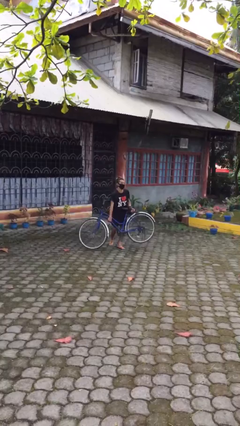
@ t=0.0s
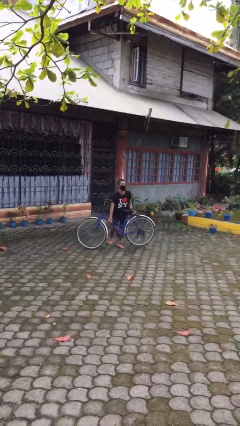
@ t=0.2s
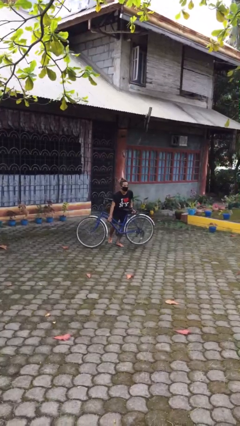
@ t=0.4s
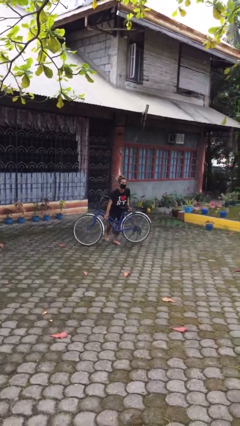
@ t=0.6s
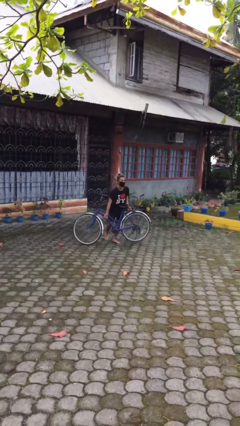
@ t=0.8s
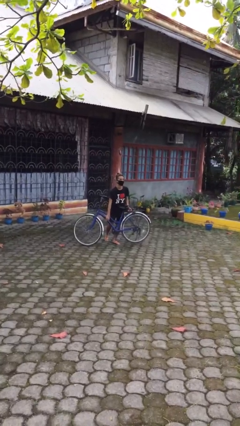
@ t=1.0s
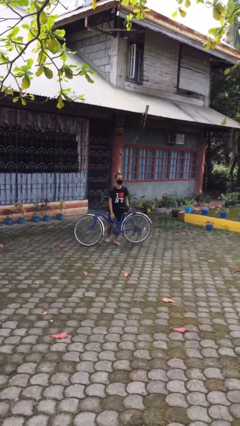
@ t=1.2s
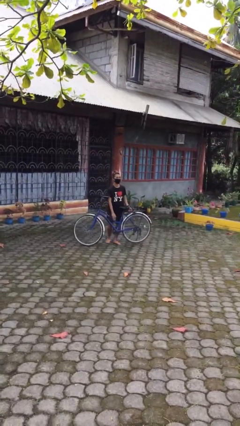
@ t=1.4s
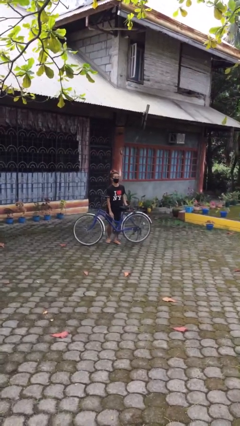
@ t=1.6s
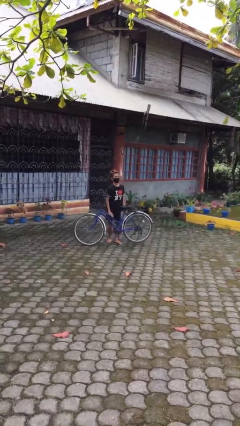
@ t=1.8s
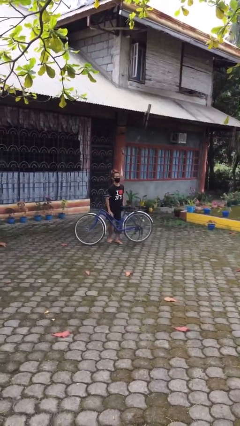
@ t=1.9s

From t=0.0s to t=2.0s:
person puts down object on floor

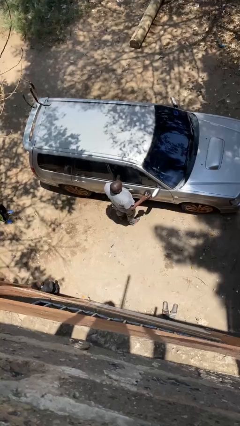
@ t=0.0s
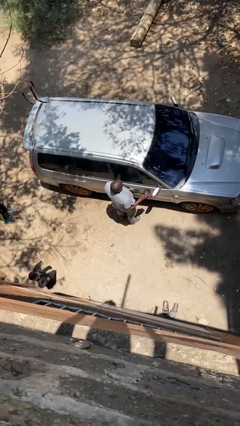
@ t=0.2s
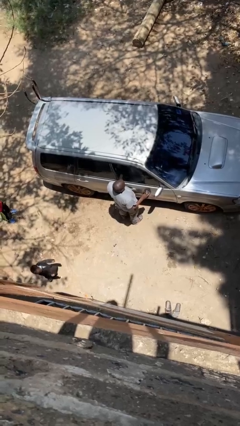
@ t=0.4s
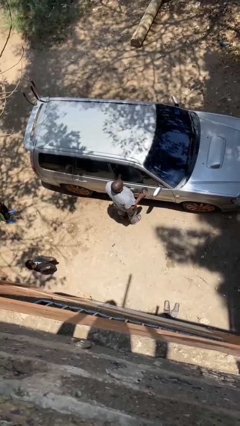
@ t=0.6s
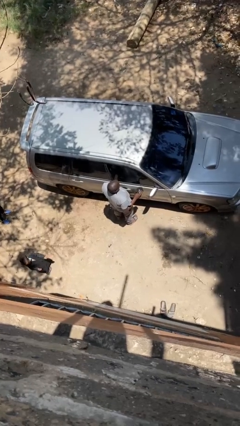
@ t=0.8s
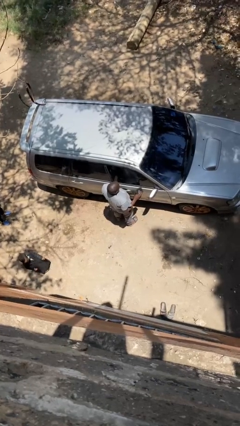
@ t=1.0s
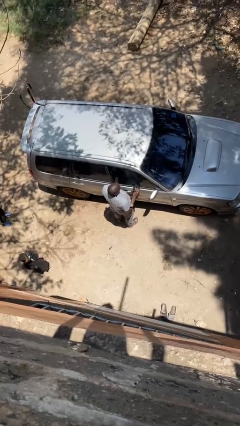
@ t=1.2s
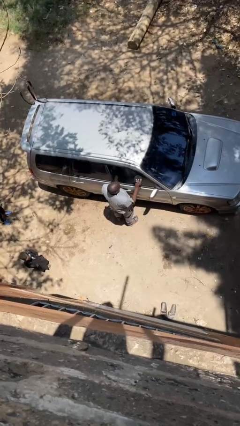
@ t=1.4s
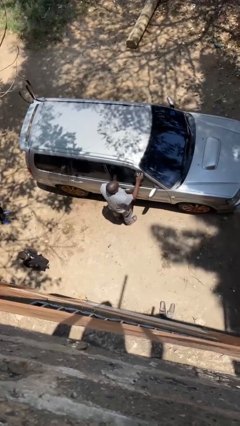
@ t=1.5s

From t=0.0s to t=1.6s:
person polishes car with rag

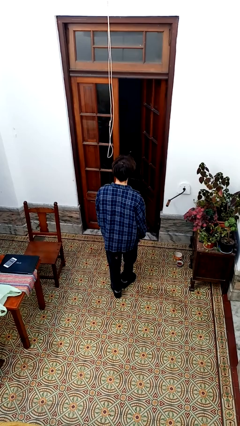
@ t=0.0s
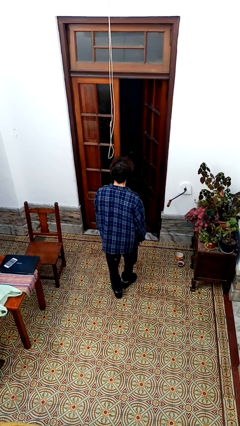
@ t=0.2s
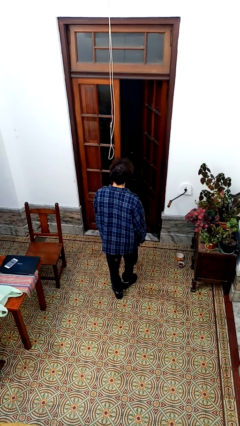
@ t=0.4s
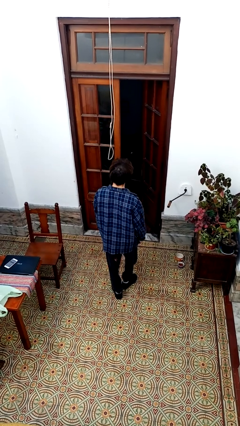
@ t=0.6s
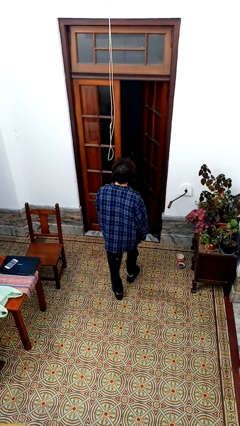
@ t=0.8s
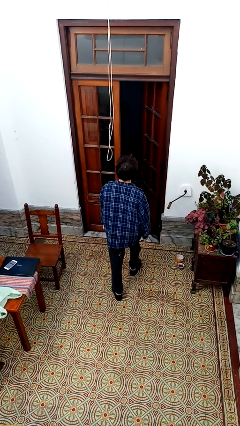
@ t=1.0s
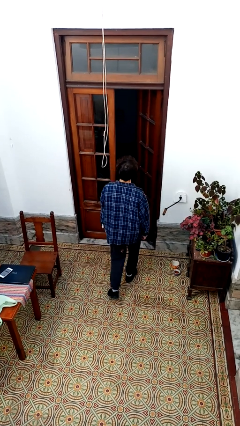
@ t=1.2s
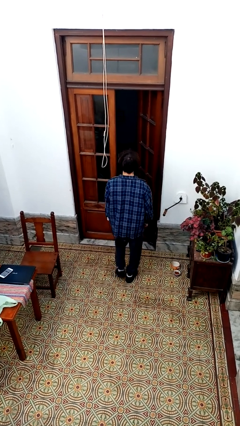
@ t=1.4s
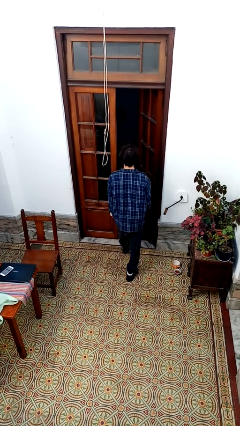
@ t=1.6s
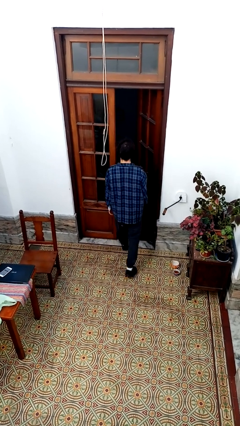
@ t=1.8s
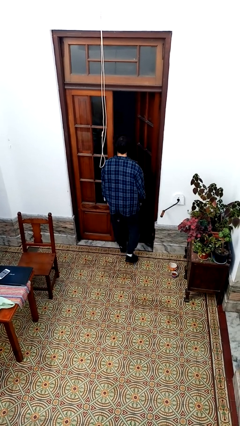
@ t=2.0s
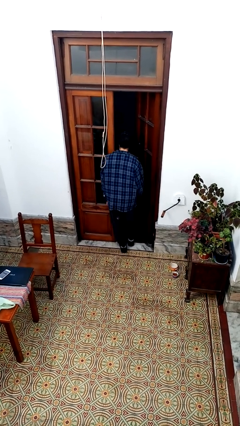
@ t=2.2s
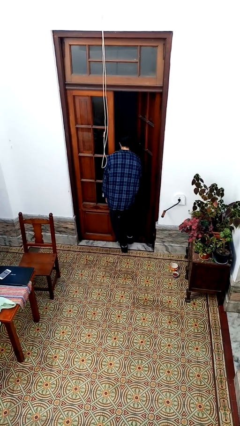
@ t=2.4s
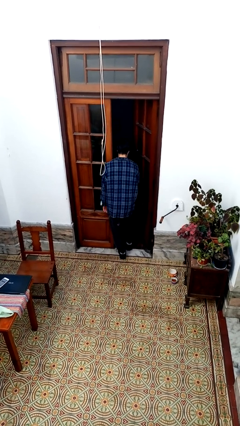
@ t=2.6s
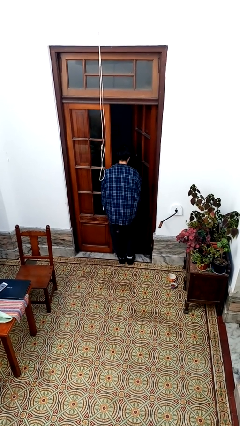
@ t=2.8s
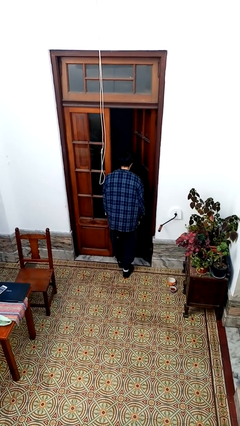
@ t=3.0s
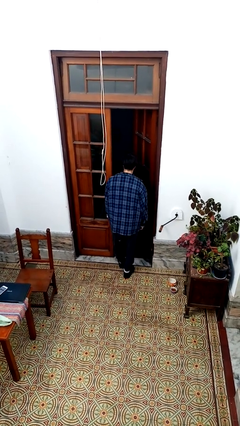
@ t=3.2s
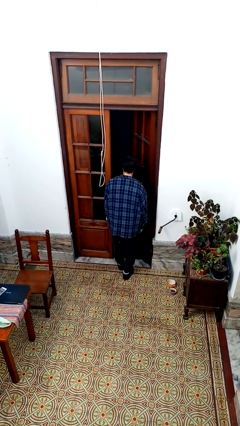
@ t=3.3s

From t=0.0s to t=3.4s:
person bumps into wall

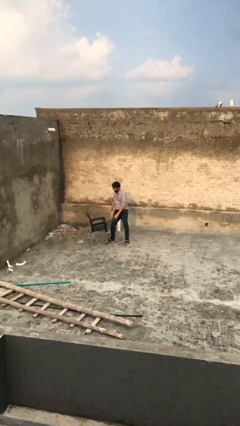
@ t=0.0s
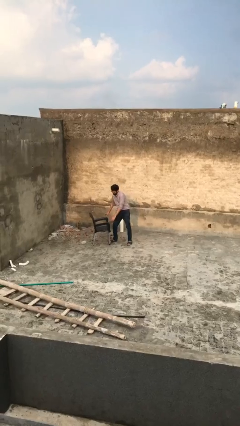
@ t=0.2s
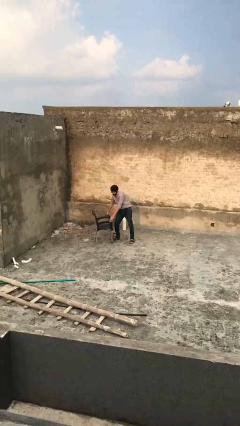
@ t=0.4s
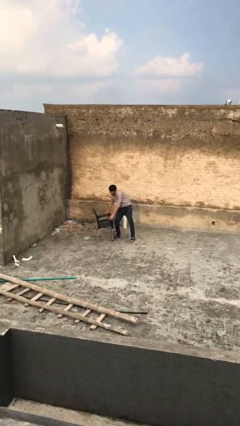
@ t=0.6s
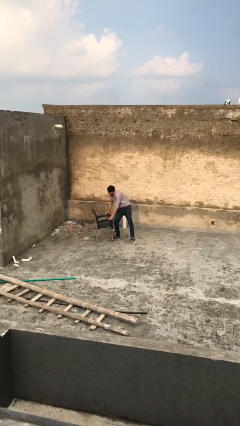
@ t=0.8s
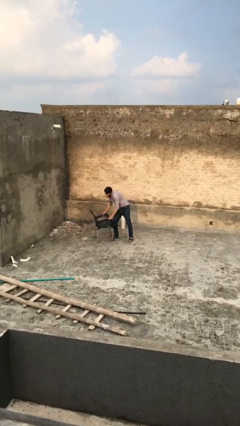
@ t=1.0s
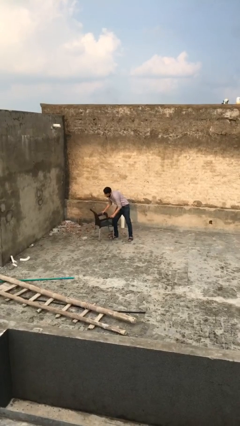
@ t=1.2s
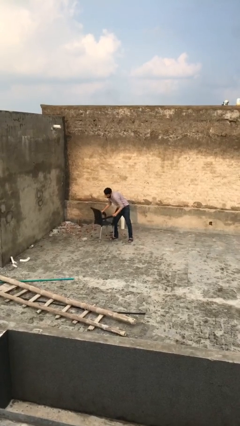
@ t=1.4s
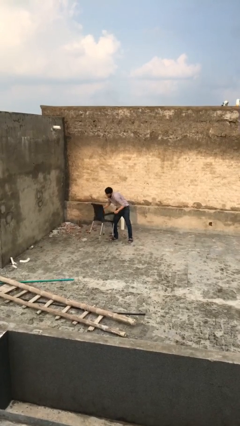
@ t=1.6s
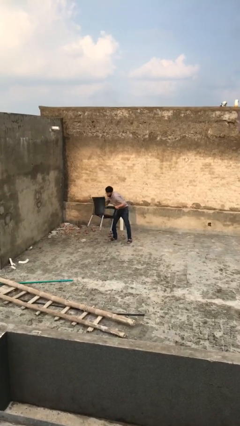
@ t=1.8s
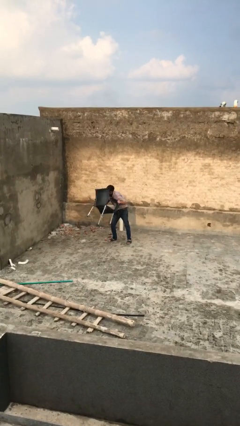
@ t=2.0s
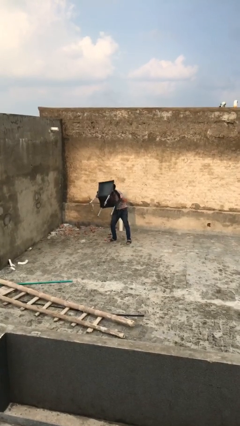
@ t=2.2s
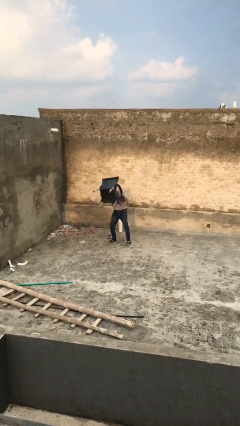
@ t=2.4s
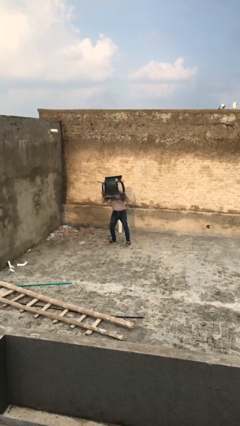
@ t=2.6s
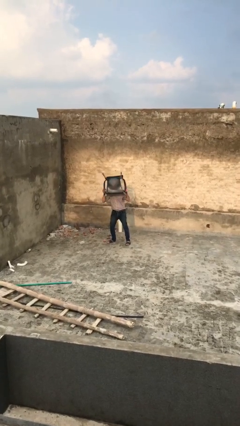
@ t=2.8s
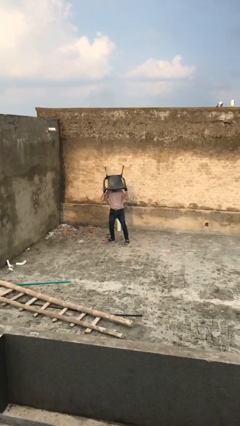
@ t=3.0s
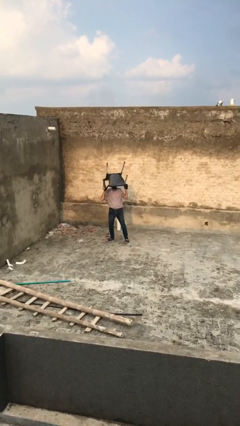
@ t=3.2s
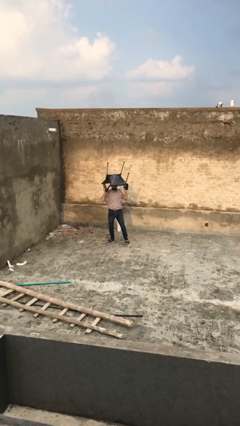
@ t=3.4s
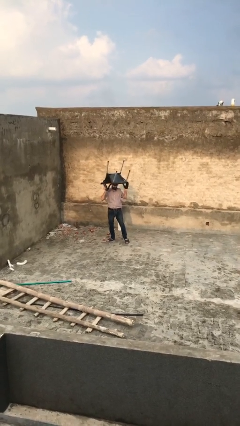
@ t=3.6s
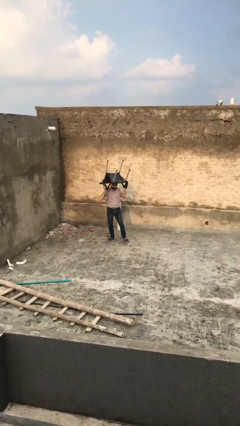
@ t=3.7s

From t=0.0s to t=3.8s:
person picks up object from floor

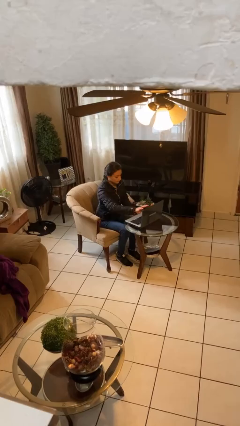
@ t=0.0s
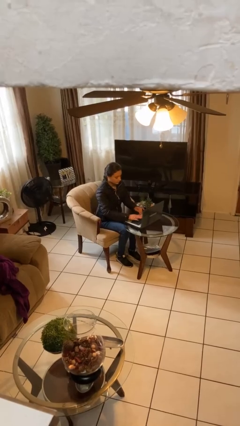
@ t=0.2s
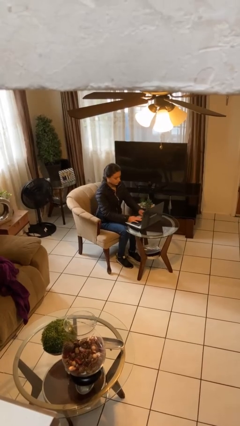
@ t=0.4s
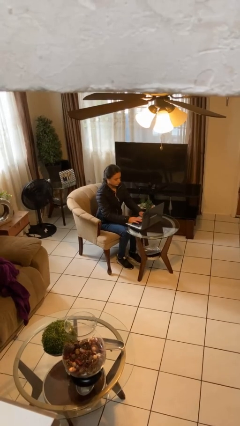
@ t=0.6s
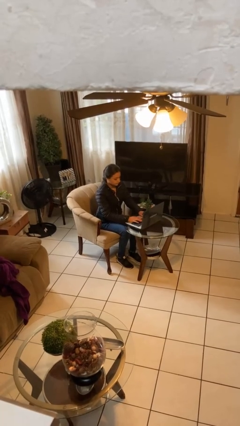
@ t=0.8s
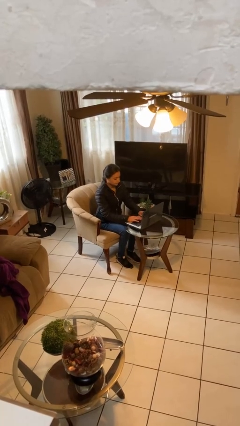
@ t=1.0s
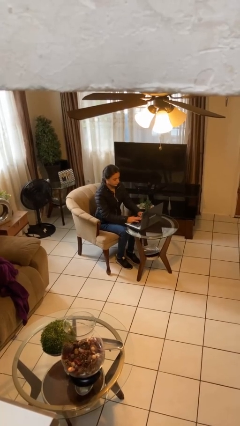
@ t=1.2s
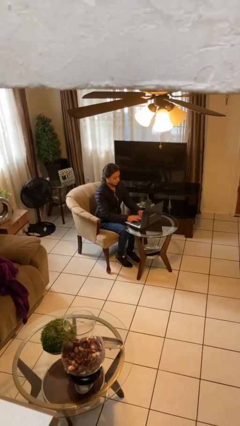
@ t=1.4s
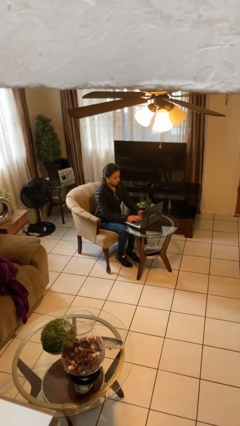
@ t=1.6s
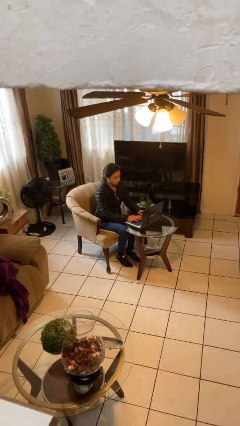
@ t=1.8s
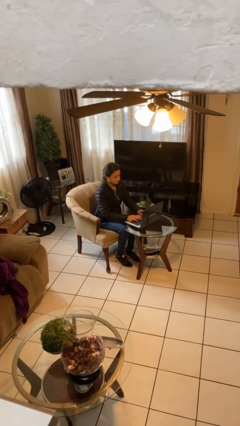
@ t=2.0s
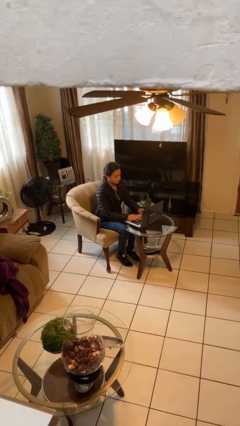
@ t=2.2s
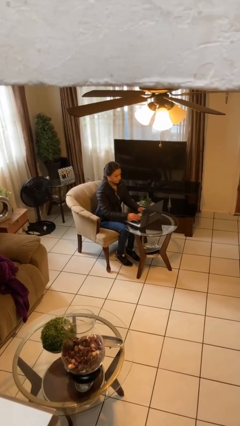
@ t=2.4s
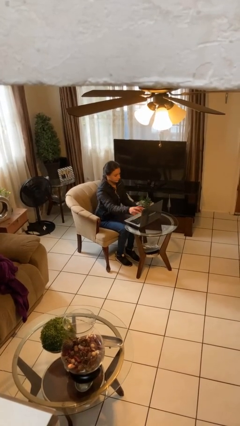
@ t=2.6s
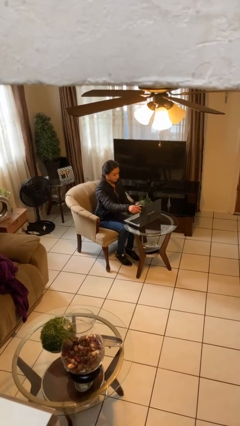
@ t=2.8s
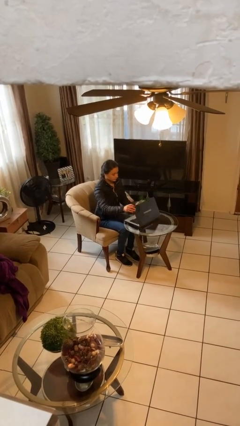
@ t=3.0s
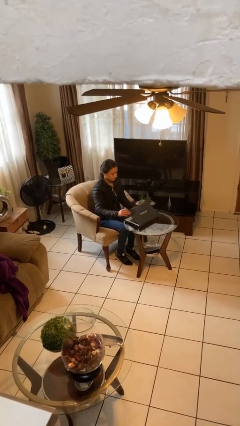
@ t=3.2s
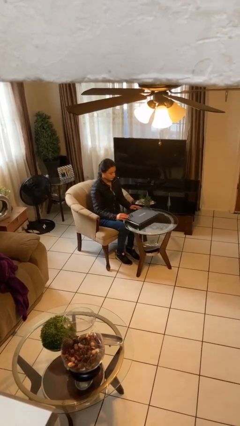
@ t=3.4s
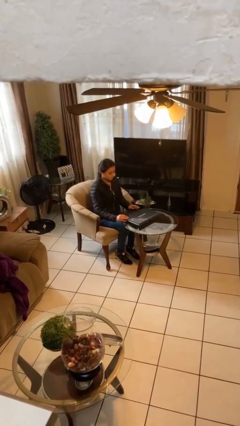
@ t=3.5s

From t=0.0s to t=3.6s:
person interacts with laptop

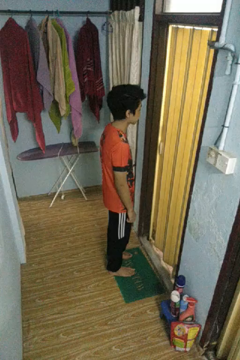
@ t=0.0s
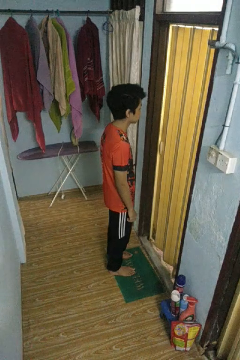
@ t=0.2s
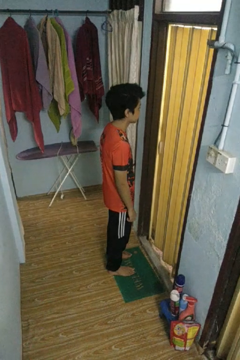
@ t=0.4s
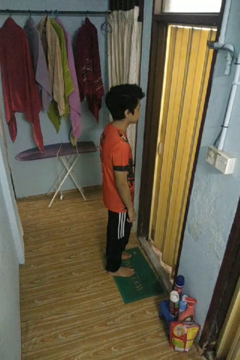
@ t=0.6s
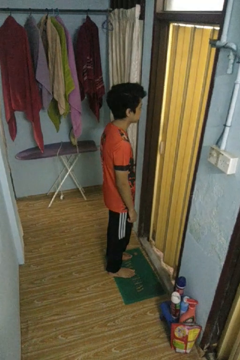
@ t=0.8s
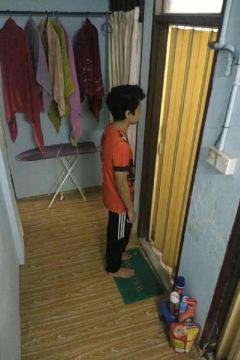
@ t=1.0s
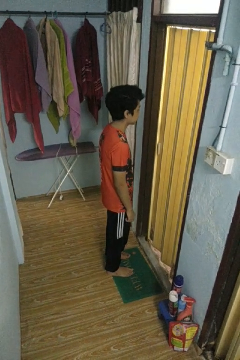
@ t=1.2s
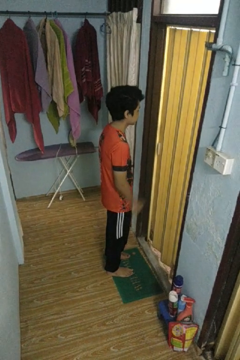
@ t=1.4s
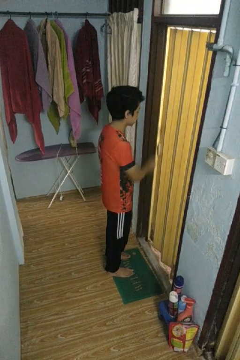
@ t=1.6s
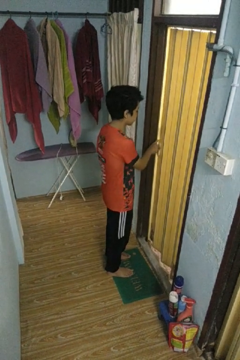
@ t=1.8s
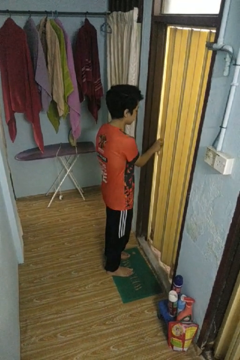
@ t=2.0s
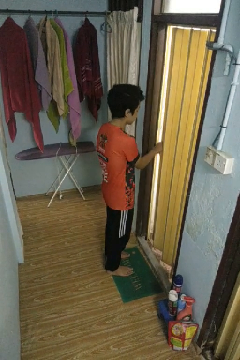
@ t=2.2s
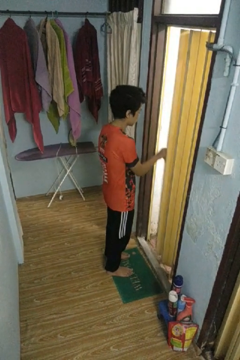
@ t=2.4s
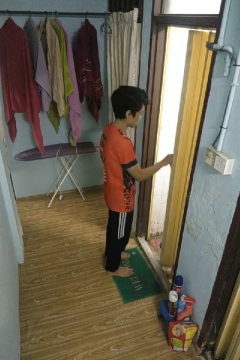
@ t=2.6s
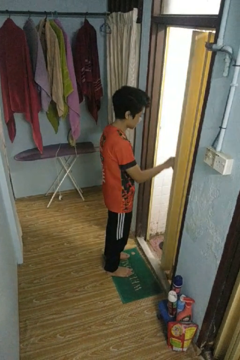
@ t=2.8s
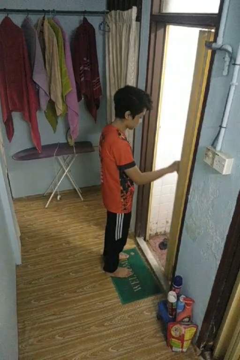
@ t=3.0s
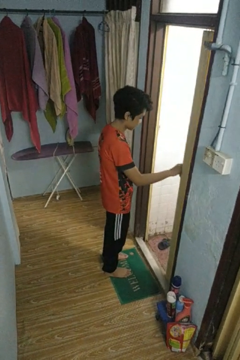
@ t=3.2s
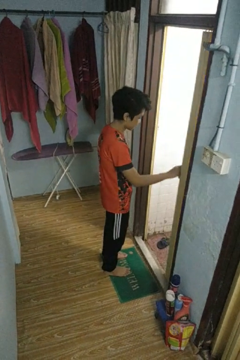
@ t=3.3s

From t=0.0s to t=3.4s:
person opens sliding door
